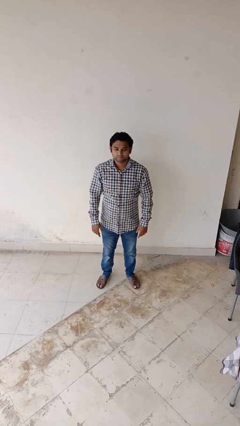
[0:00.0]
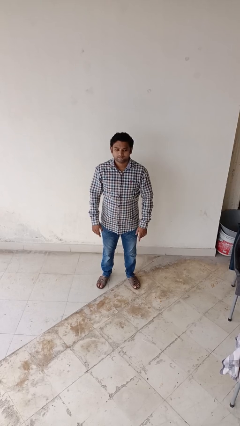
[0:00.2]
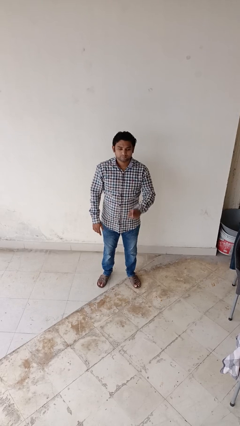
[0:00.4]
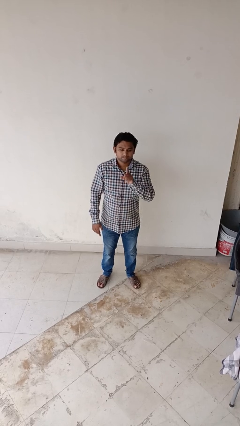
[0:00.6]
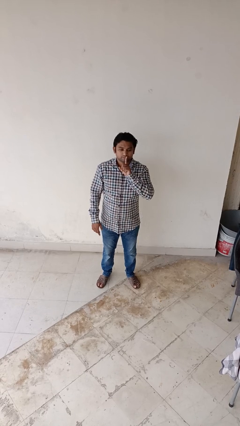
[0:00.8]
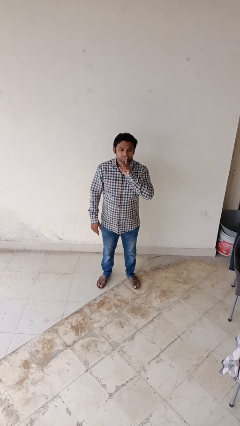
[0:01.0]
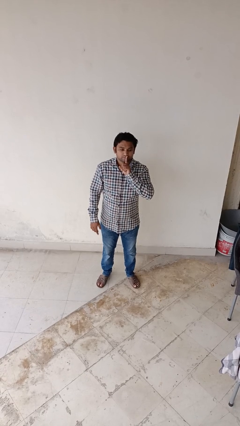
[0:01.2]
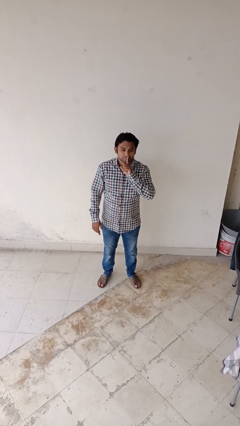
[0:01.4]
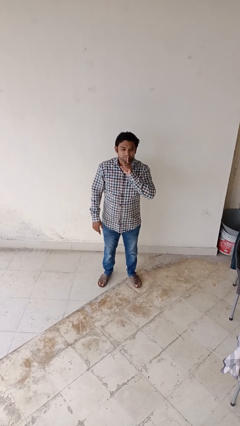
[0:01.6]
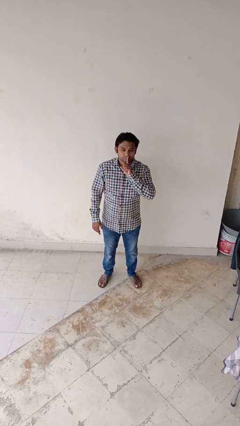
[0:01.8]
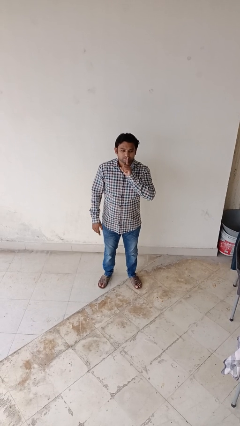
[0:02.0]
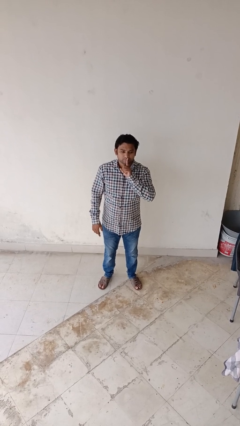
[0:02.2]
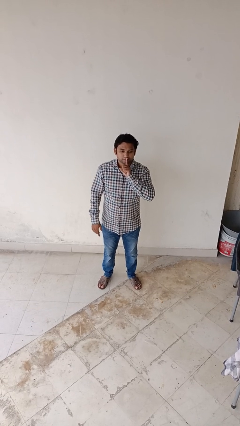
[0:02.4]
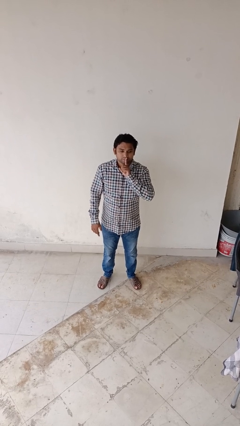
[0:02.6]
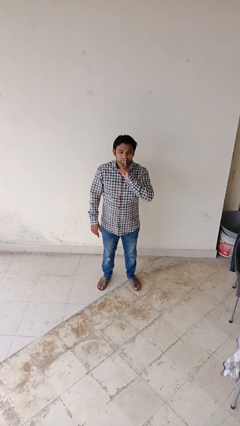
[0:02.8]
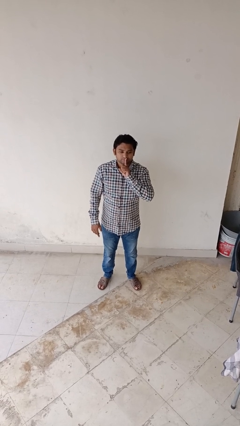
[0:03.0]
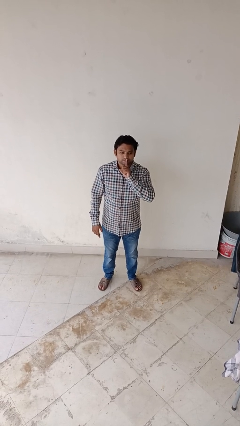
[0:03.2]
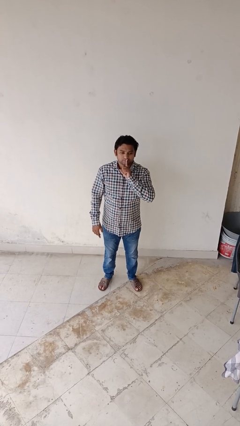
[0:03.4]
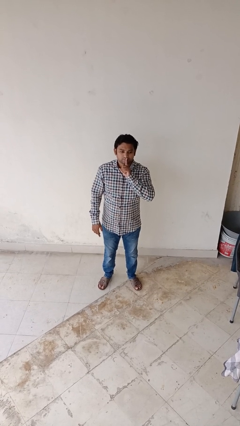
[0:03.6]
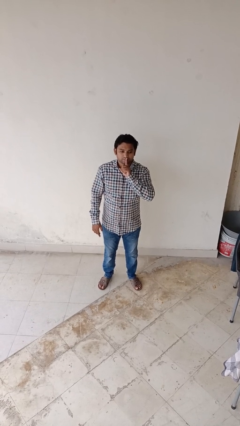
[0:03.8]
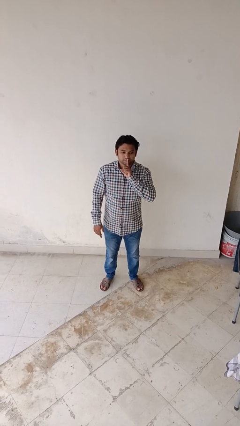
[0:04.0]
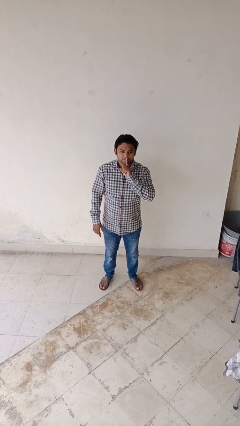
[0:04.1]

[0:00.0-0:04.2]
person gestures be quiet

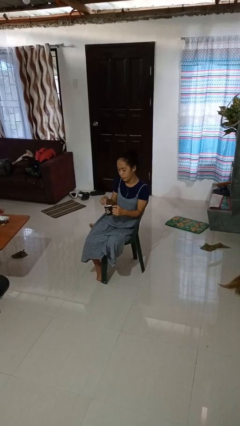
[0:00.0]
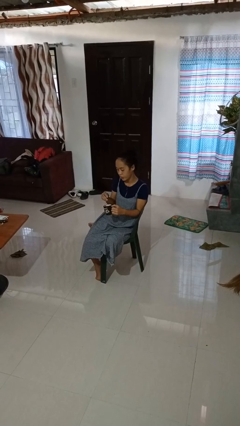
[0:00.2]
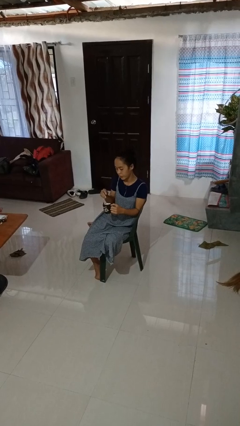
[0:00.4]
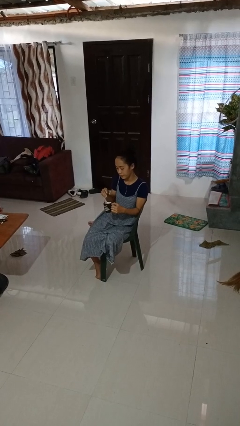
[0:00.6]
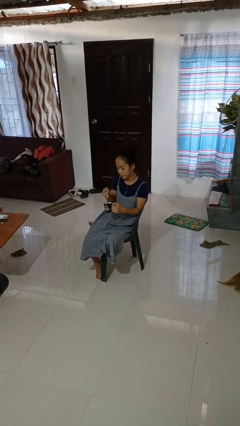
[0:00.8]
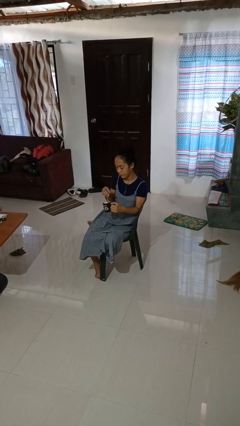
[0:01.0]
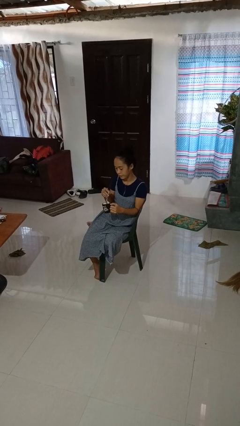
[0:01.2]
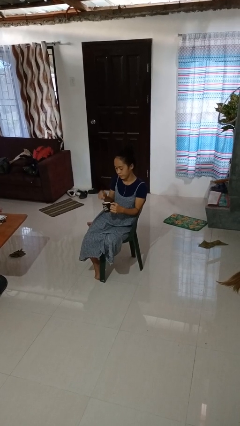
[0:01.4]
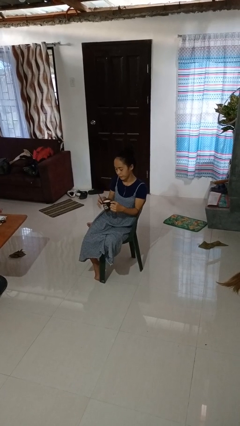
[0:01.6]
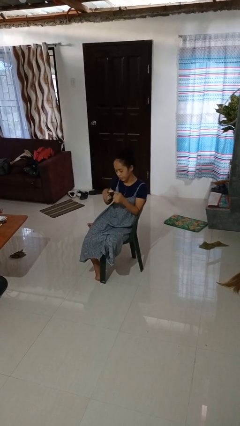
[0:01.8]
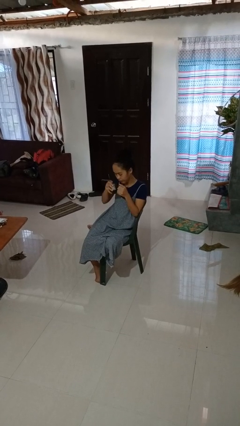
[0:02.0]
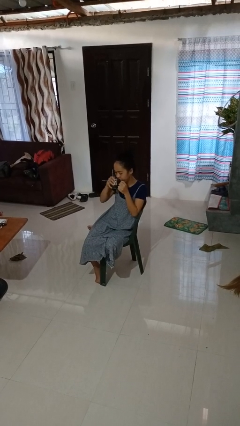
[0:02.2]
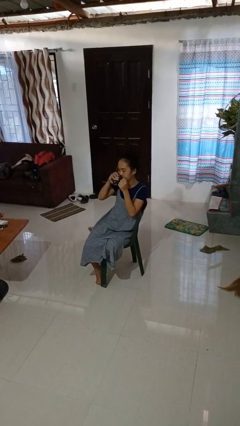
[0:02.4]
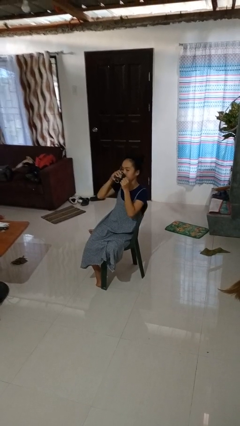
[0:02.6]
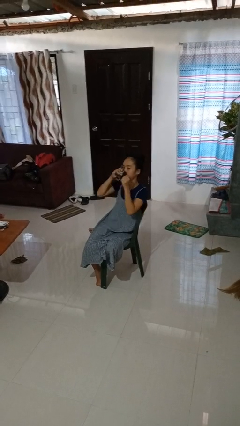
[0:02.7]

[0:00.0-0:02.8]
person stirs mug

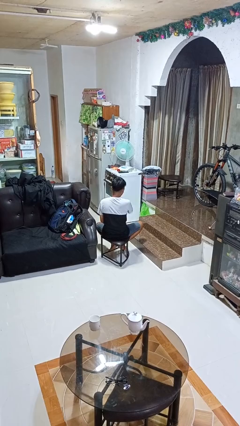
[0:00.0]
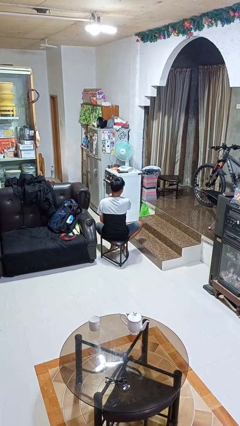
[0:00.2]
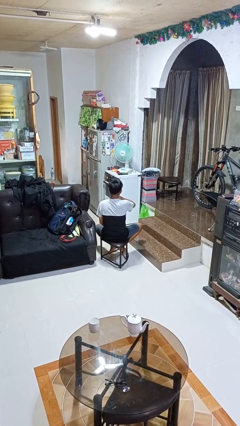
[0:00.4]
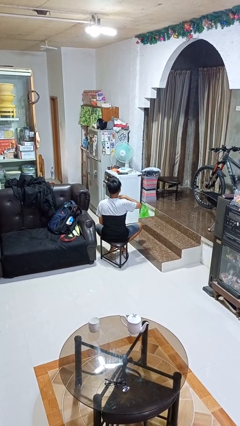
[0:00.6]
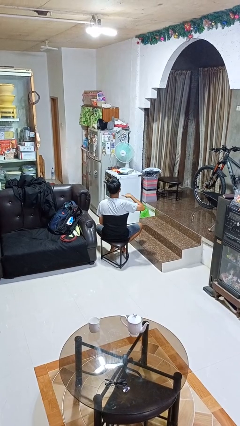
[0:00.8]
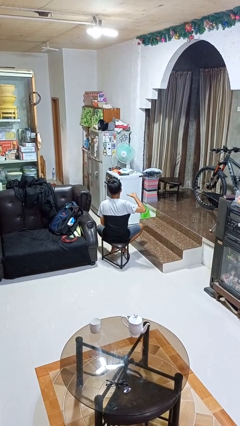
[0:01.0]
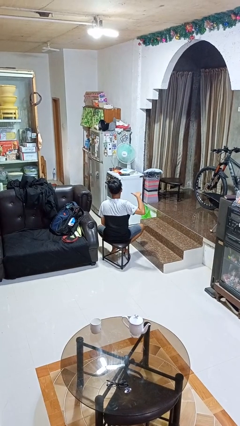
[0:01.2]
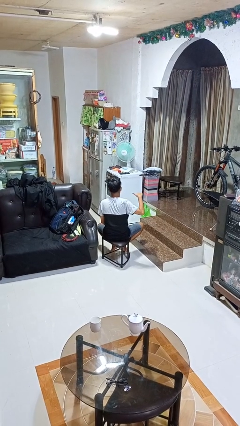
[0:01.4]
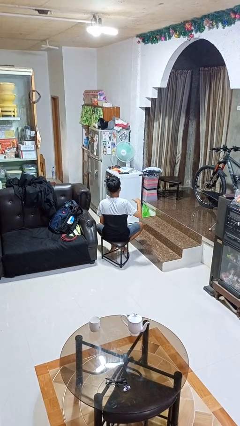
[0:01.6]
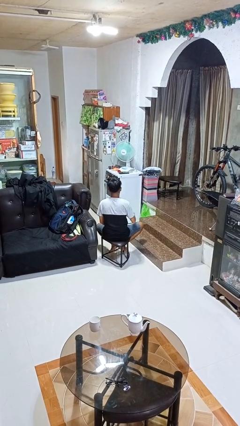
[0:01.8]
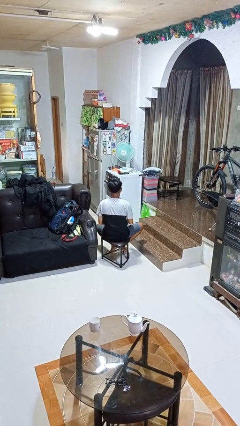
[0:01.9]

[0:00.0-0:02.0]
person gestures cut

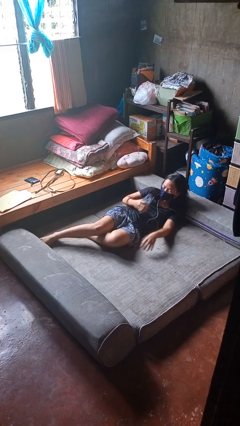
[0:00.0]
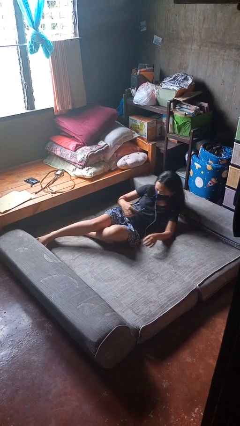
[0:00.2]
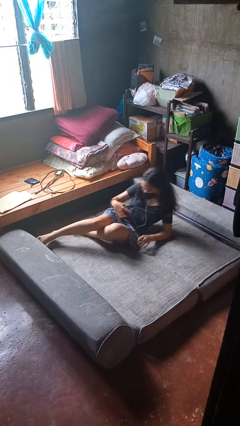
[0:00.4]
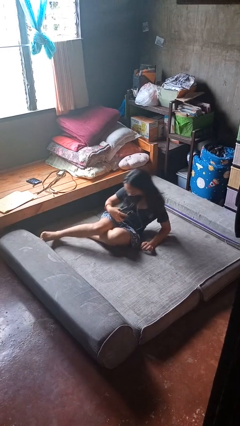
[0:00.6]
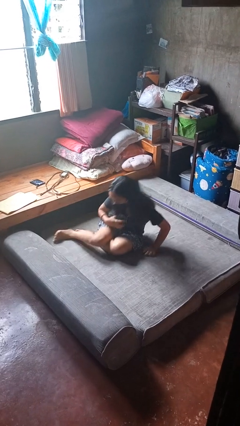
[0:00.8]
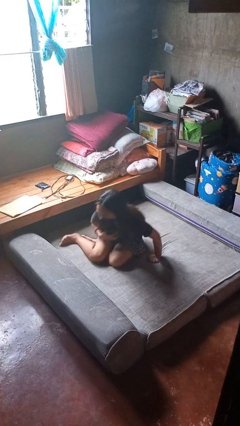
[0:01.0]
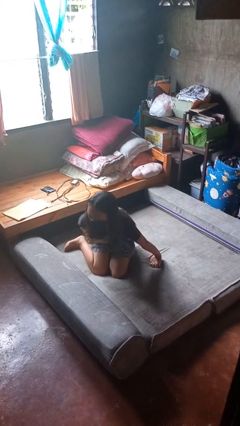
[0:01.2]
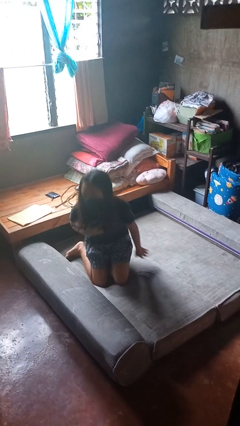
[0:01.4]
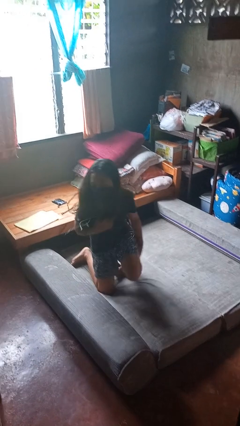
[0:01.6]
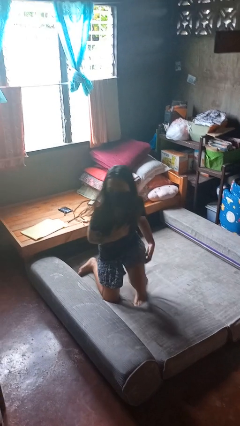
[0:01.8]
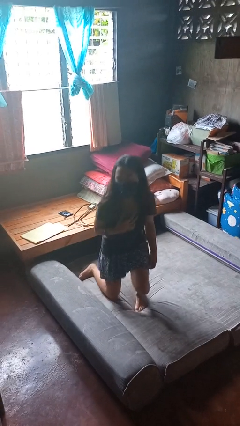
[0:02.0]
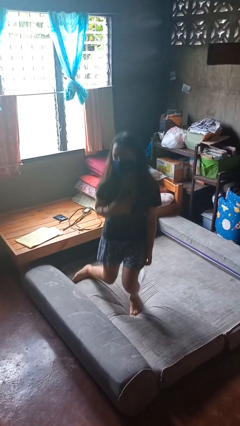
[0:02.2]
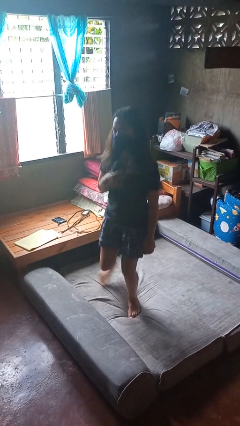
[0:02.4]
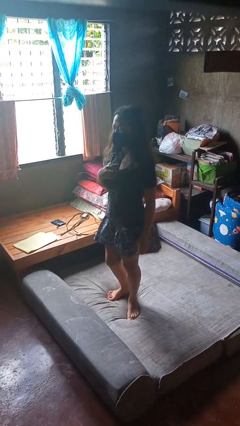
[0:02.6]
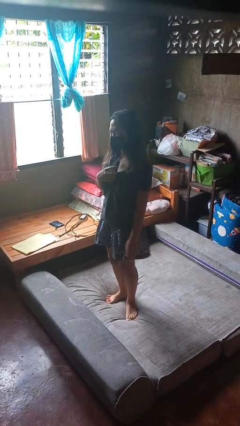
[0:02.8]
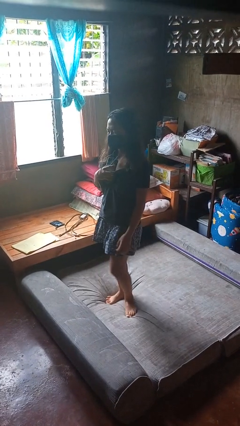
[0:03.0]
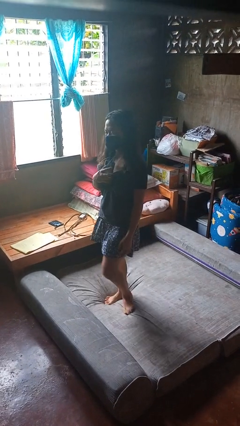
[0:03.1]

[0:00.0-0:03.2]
person stands up

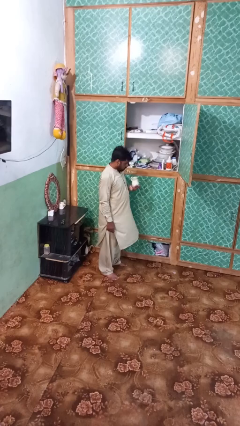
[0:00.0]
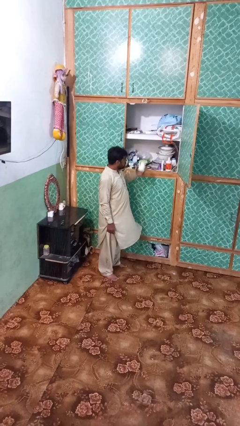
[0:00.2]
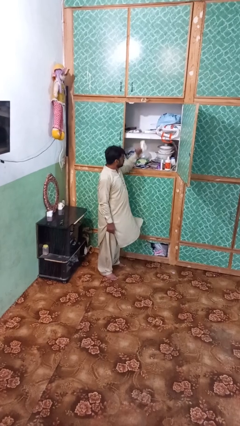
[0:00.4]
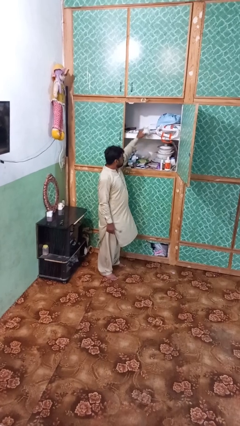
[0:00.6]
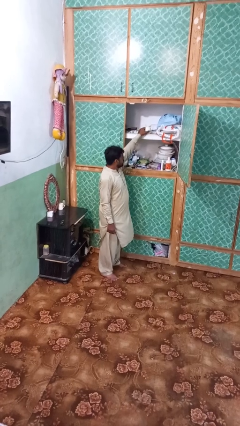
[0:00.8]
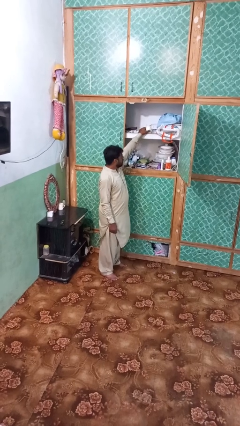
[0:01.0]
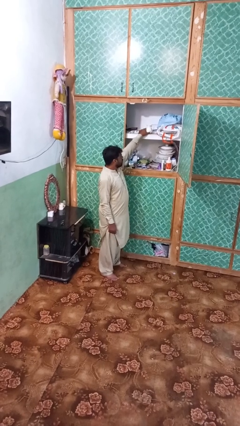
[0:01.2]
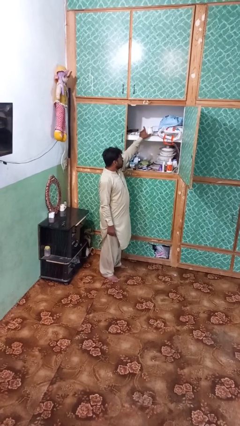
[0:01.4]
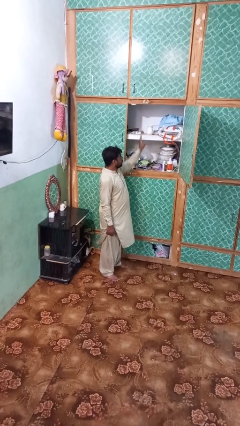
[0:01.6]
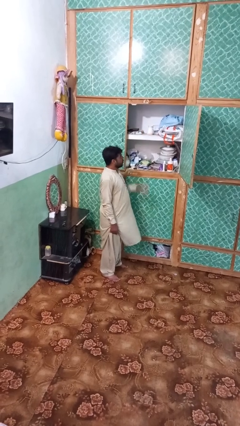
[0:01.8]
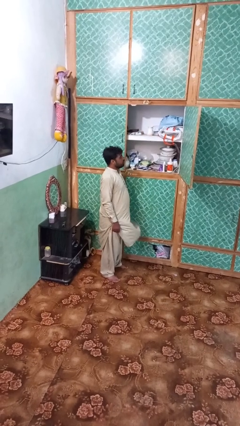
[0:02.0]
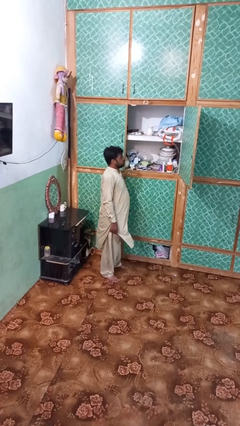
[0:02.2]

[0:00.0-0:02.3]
person puts down object on shelf

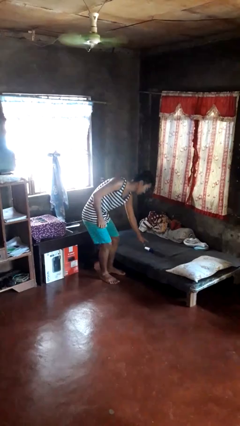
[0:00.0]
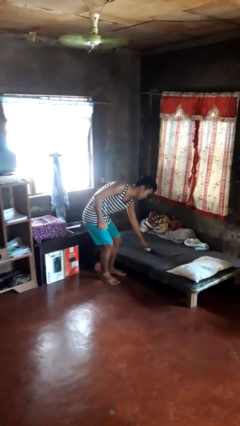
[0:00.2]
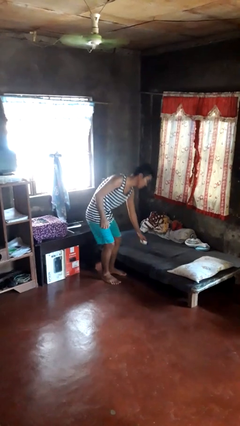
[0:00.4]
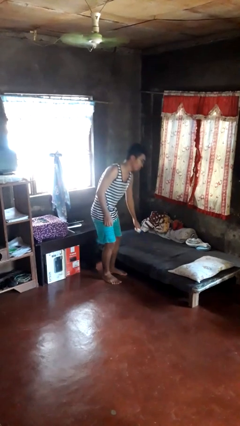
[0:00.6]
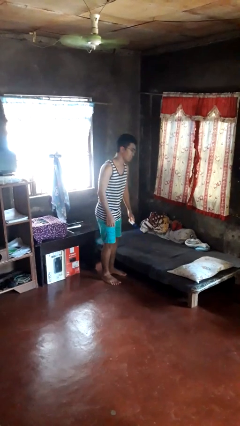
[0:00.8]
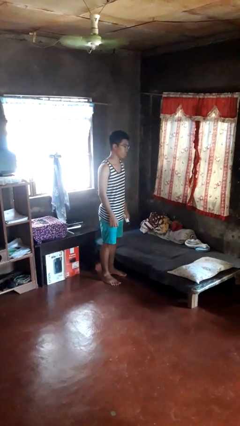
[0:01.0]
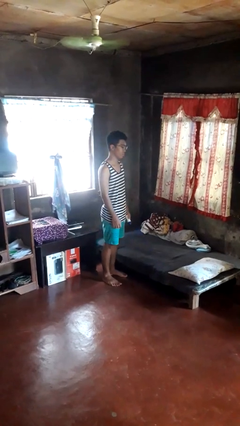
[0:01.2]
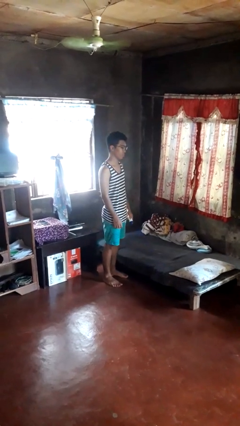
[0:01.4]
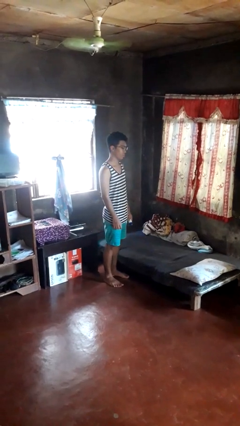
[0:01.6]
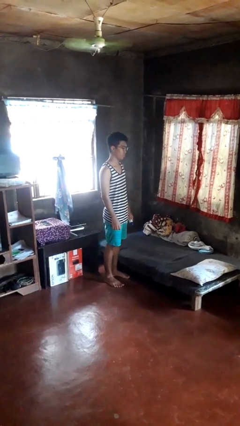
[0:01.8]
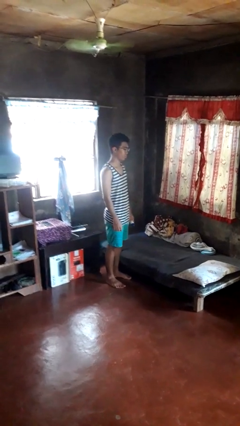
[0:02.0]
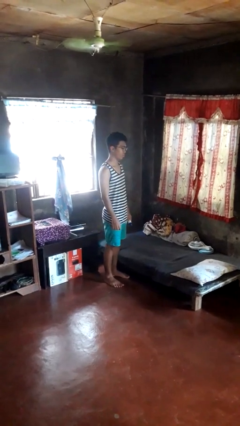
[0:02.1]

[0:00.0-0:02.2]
person picks up object from bed

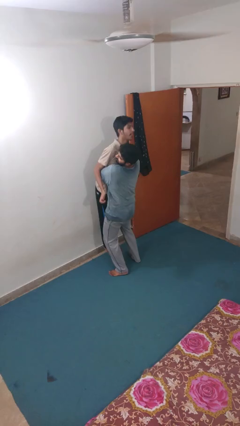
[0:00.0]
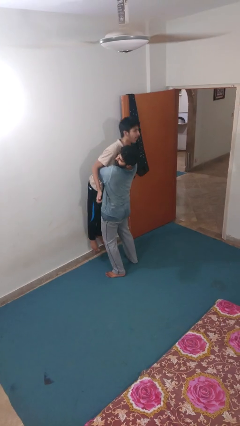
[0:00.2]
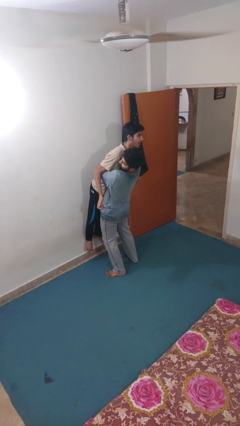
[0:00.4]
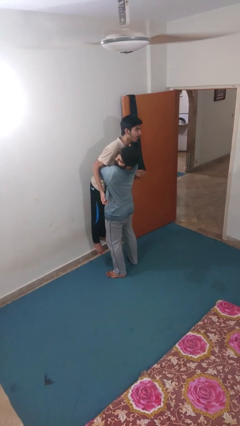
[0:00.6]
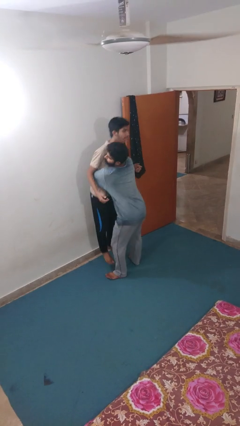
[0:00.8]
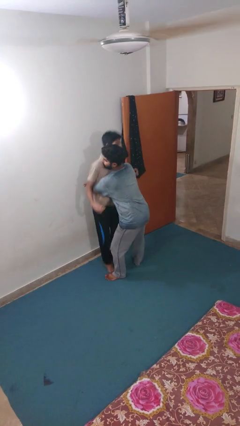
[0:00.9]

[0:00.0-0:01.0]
person puts down person
